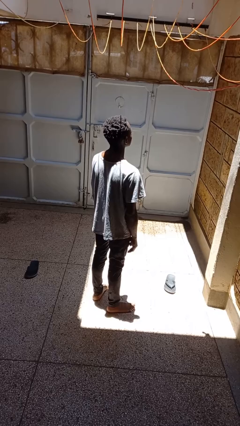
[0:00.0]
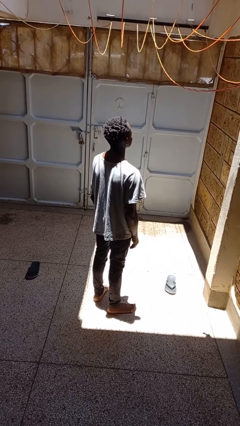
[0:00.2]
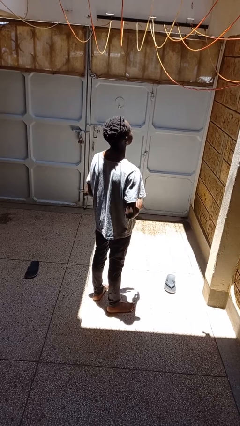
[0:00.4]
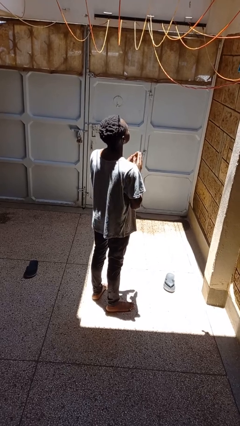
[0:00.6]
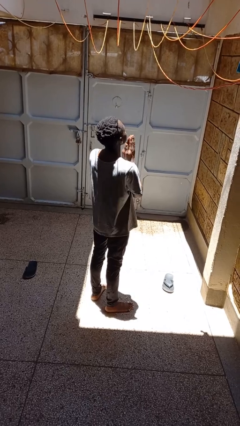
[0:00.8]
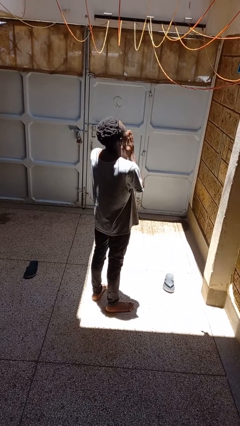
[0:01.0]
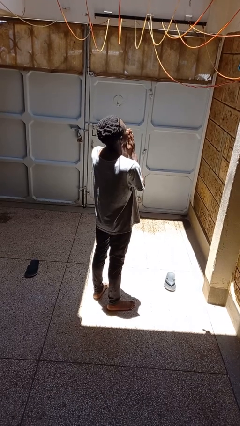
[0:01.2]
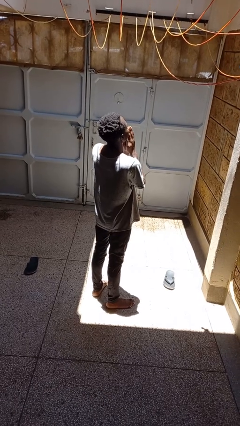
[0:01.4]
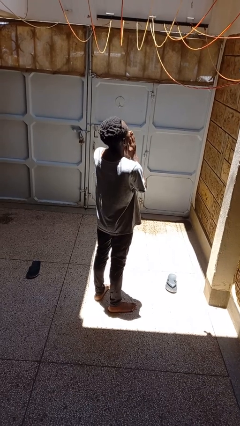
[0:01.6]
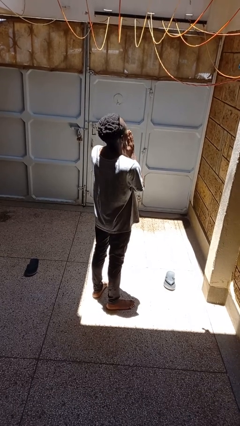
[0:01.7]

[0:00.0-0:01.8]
person prays

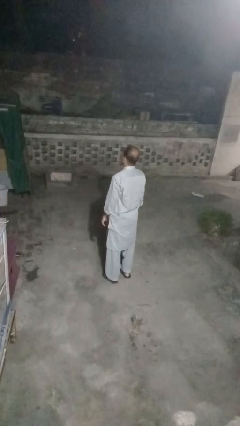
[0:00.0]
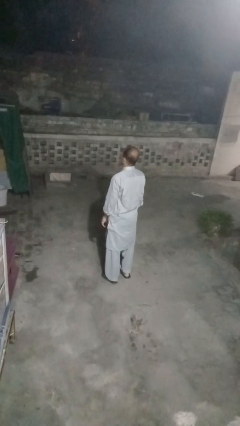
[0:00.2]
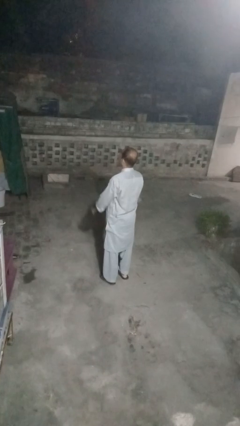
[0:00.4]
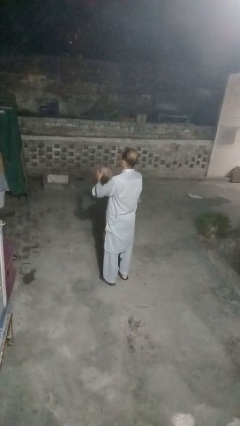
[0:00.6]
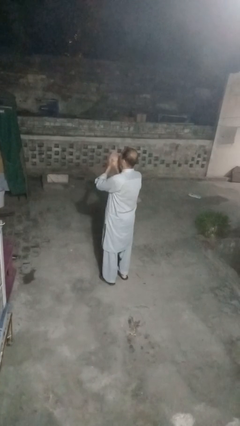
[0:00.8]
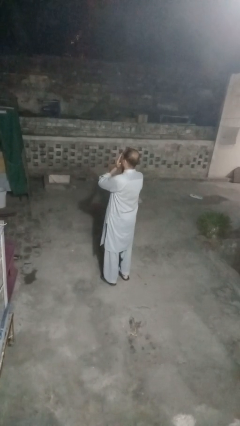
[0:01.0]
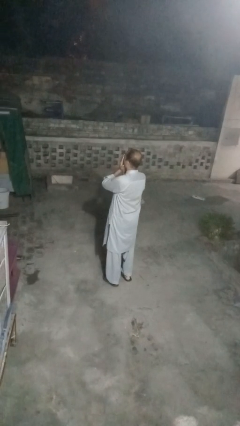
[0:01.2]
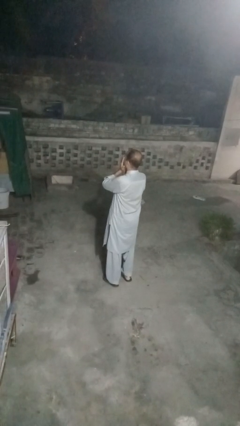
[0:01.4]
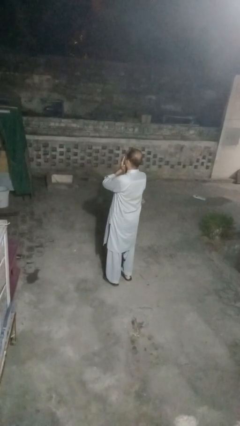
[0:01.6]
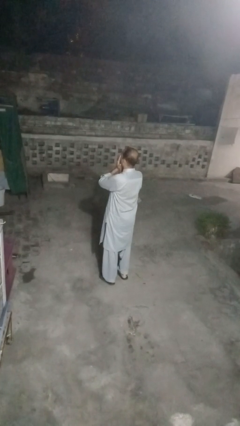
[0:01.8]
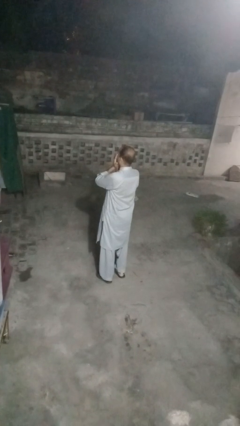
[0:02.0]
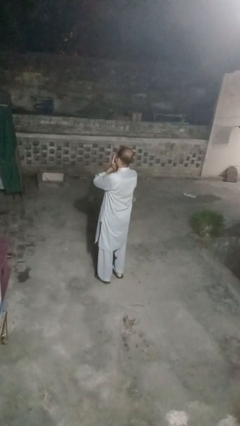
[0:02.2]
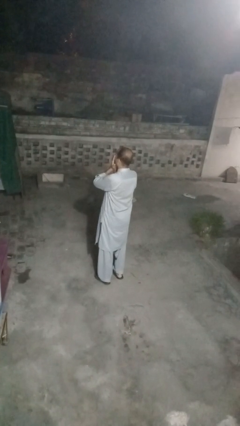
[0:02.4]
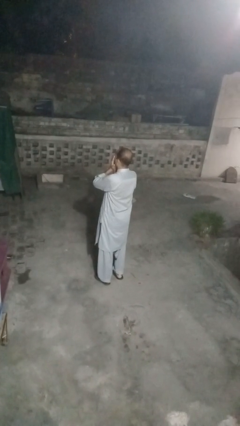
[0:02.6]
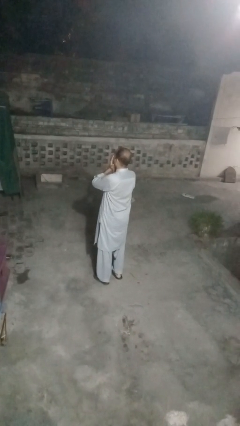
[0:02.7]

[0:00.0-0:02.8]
person covers face with hands

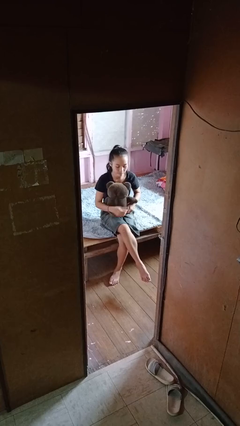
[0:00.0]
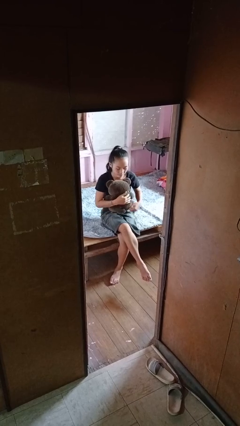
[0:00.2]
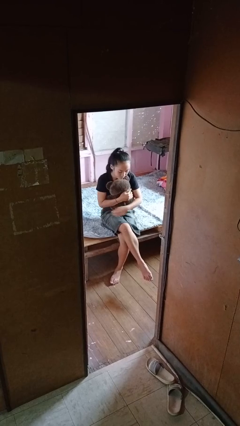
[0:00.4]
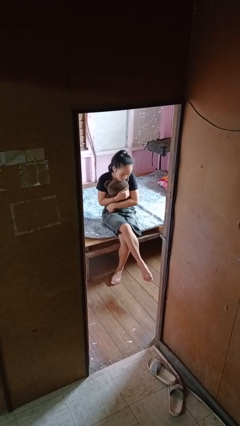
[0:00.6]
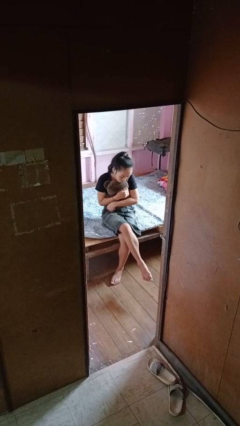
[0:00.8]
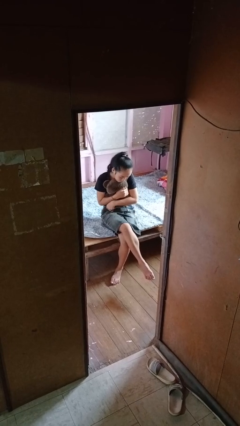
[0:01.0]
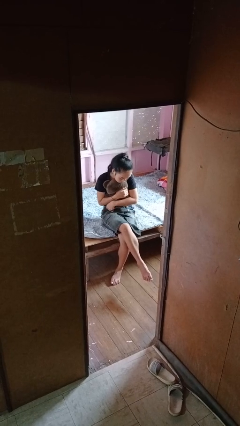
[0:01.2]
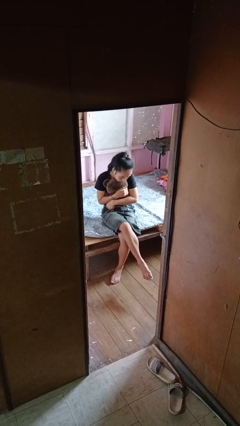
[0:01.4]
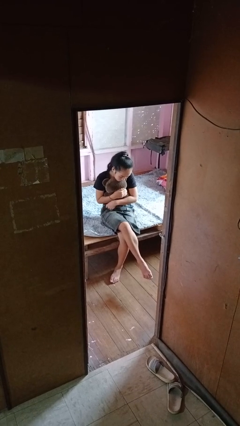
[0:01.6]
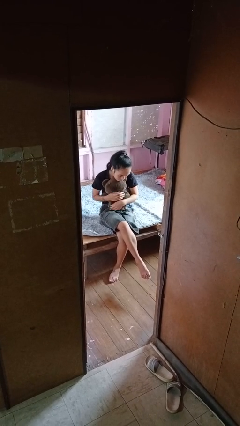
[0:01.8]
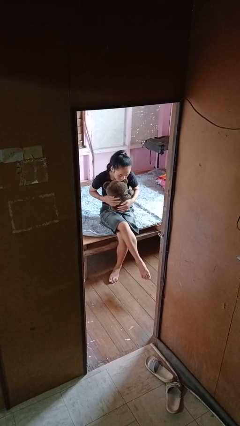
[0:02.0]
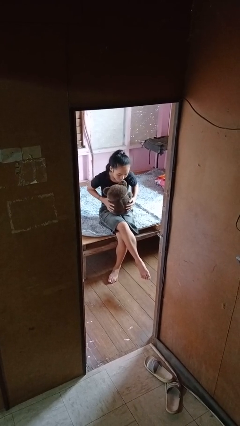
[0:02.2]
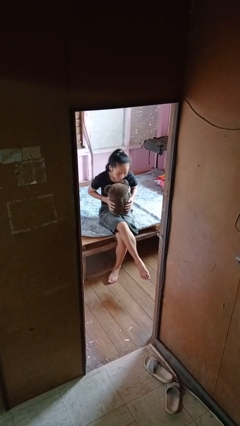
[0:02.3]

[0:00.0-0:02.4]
person hugs stuffed animal

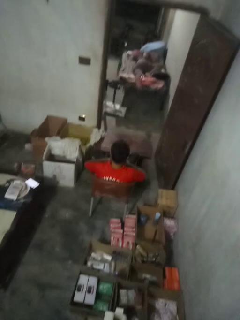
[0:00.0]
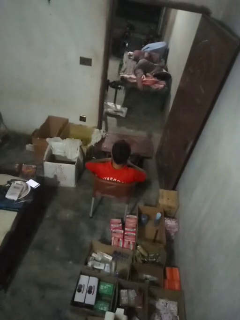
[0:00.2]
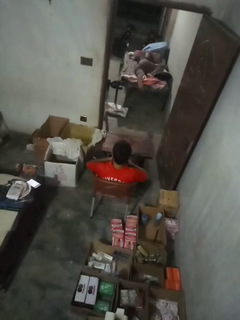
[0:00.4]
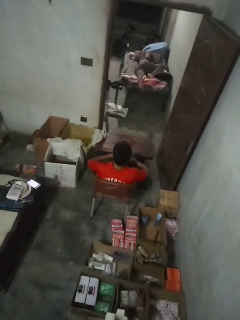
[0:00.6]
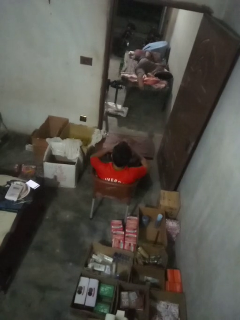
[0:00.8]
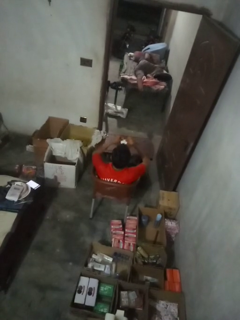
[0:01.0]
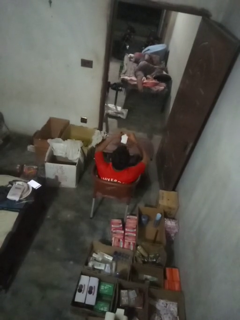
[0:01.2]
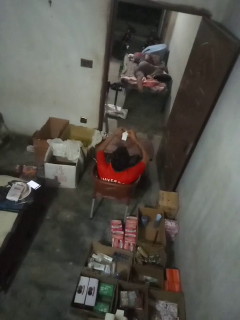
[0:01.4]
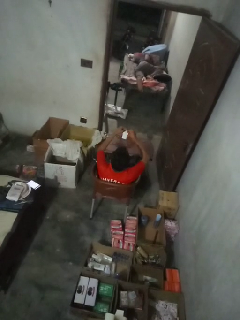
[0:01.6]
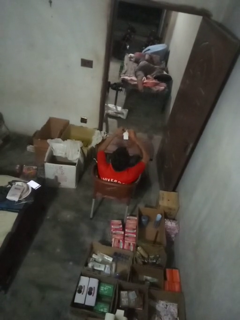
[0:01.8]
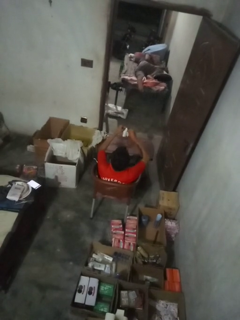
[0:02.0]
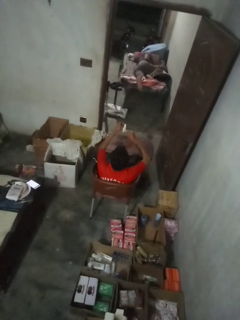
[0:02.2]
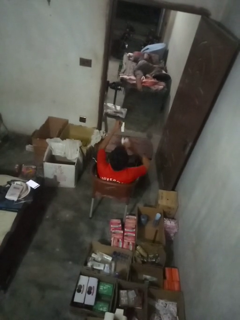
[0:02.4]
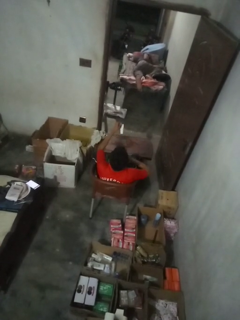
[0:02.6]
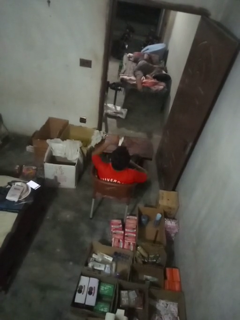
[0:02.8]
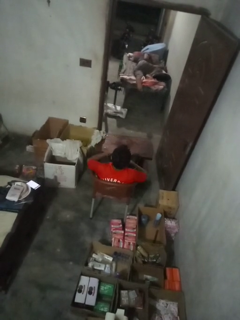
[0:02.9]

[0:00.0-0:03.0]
person tears paper

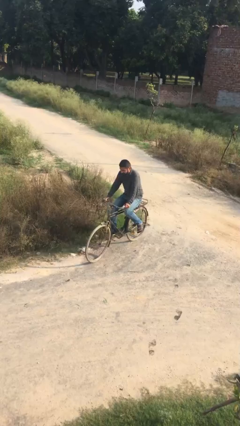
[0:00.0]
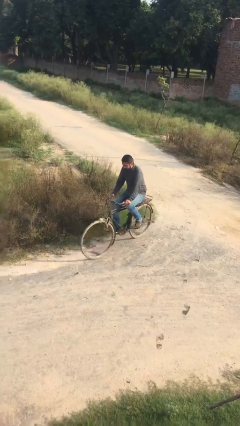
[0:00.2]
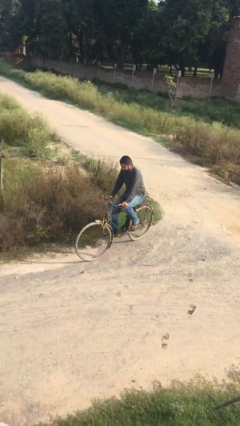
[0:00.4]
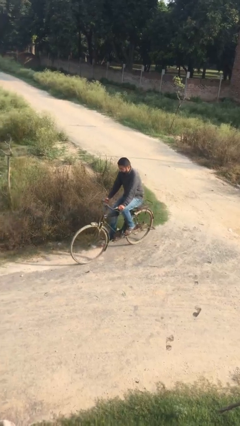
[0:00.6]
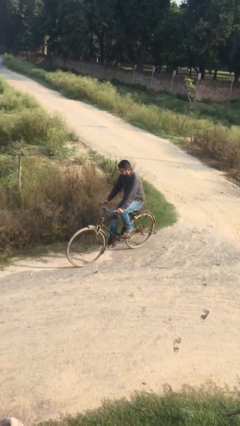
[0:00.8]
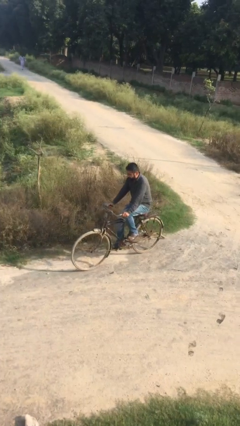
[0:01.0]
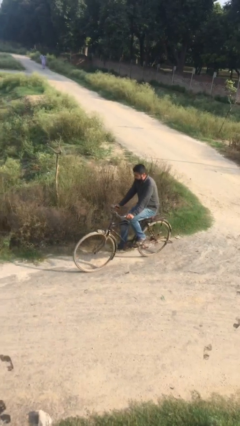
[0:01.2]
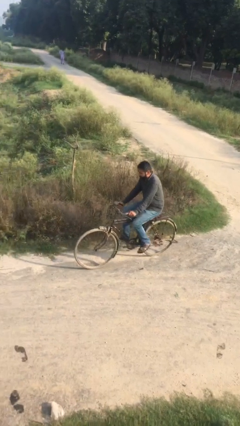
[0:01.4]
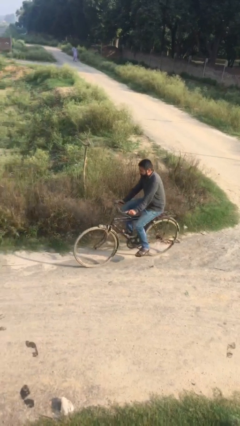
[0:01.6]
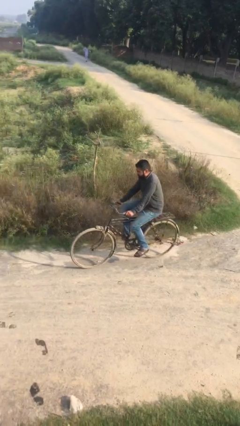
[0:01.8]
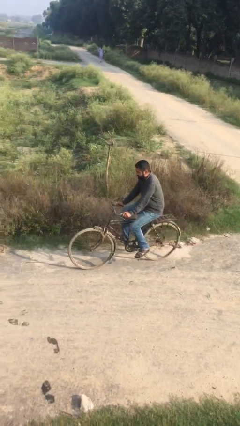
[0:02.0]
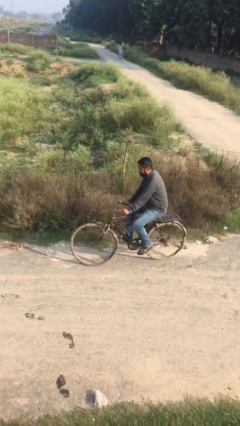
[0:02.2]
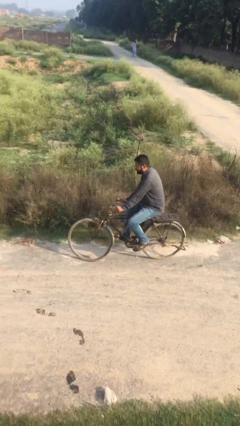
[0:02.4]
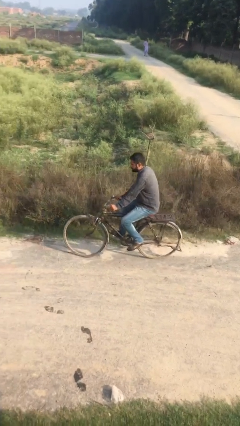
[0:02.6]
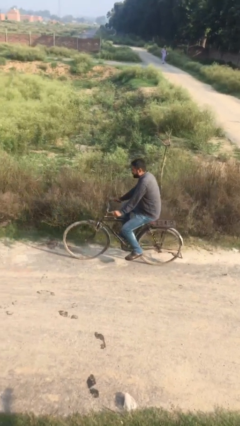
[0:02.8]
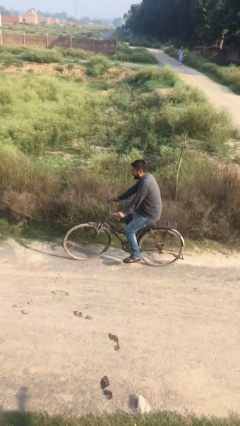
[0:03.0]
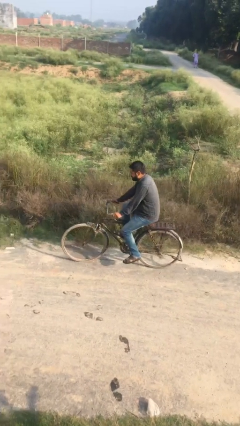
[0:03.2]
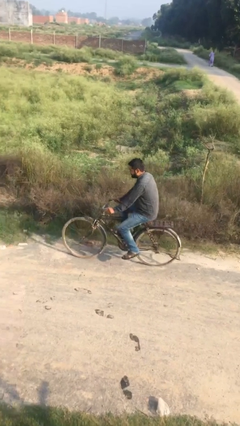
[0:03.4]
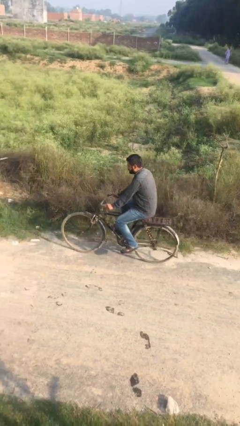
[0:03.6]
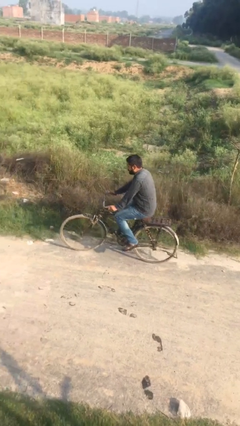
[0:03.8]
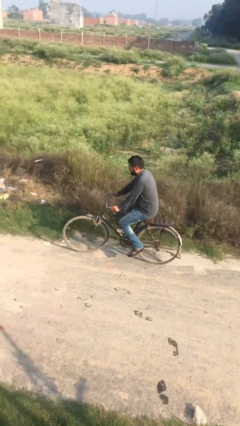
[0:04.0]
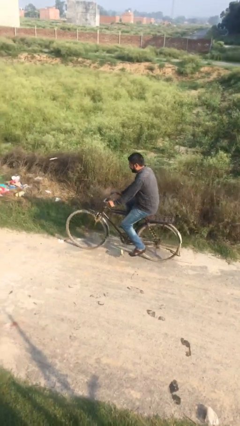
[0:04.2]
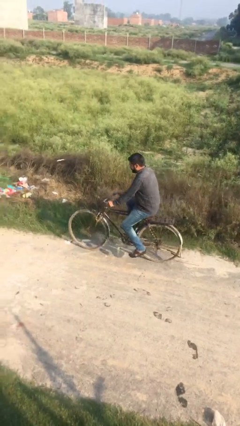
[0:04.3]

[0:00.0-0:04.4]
person rides bicycle

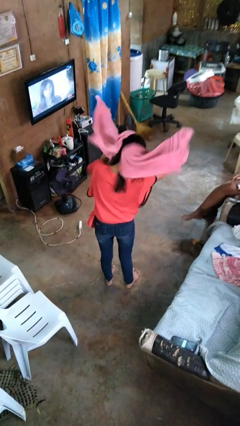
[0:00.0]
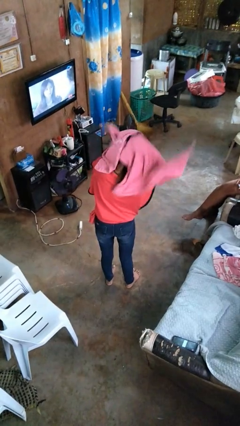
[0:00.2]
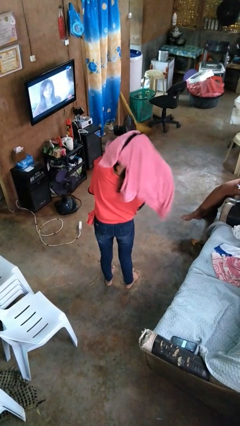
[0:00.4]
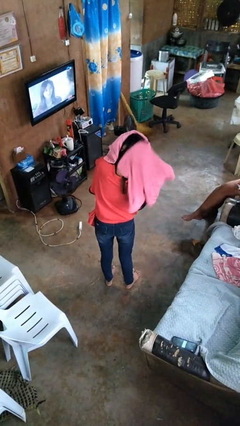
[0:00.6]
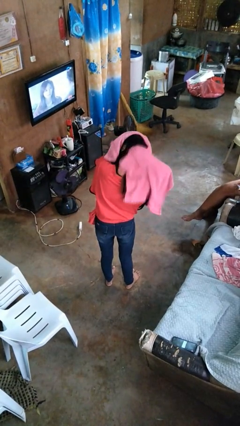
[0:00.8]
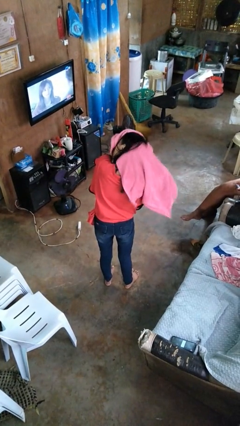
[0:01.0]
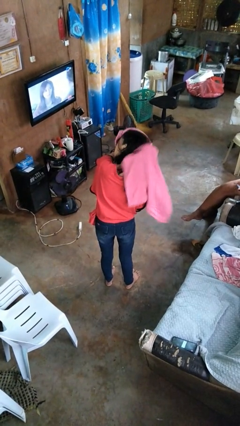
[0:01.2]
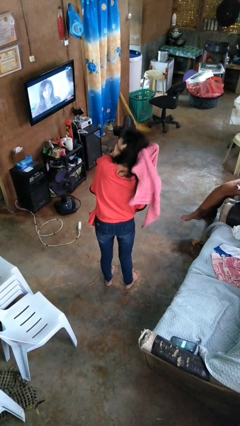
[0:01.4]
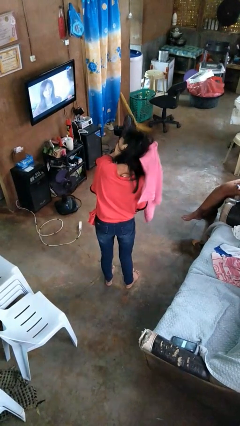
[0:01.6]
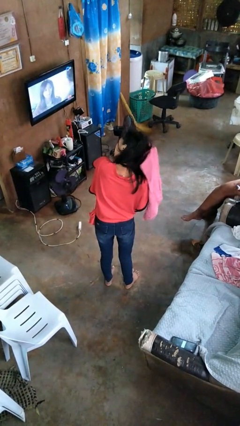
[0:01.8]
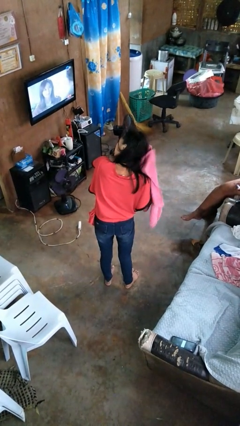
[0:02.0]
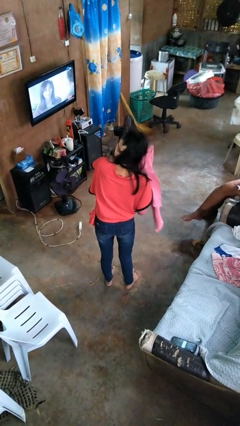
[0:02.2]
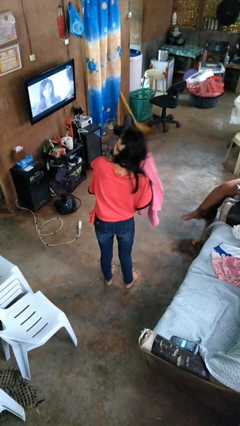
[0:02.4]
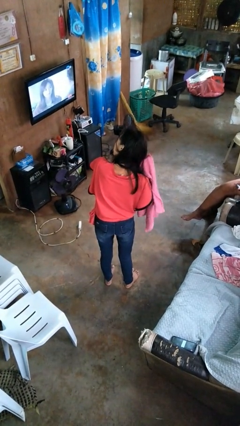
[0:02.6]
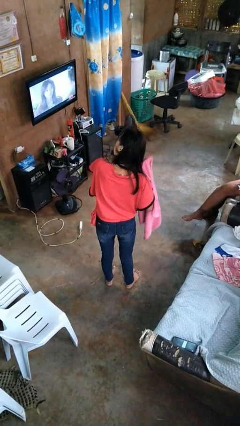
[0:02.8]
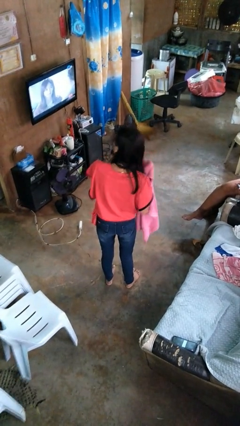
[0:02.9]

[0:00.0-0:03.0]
person dries hair with towel

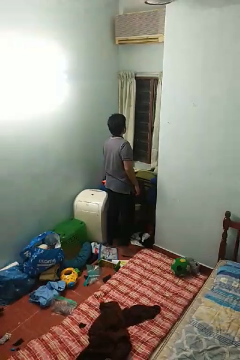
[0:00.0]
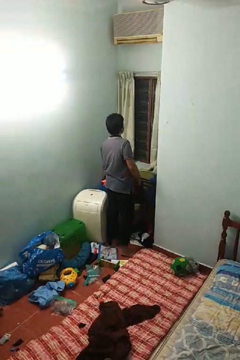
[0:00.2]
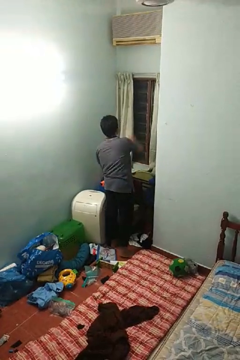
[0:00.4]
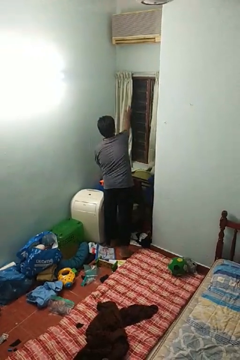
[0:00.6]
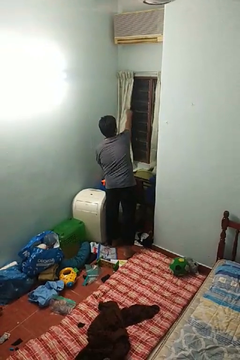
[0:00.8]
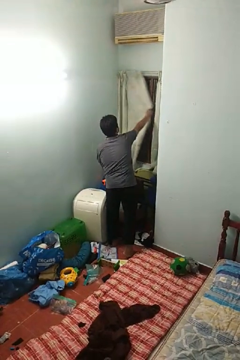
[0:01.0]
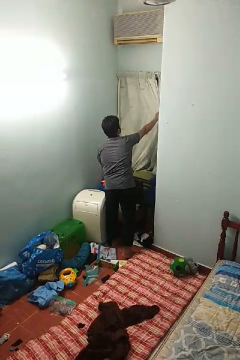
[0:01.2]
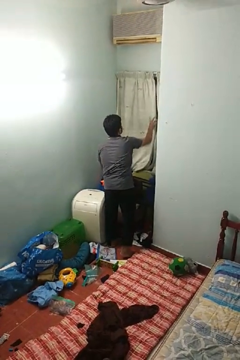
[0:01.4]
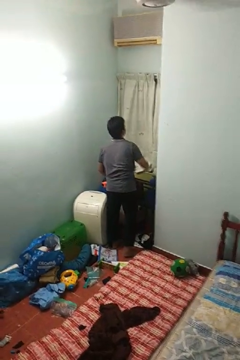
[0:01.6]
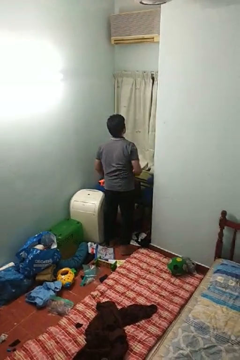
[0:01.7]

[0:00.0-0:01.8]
person closes curtains
